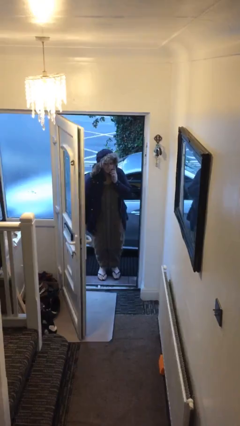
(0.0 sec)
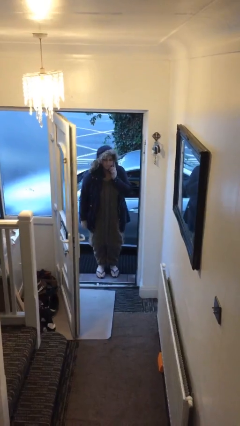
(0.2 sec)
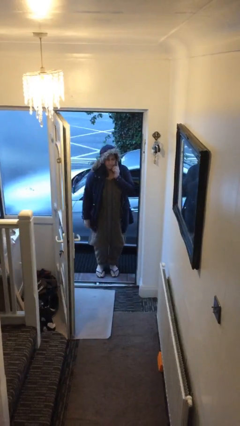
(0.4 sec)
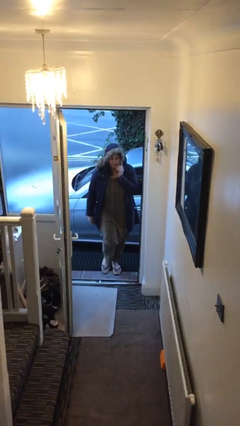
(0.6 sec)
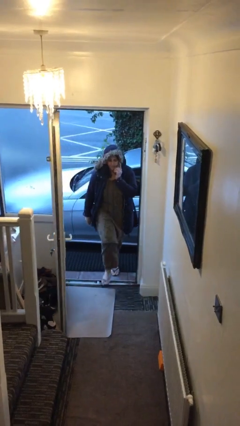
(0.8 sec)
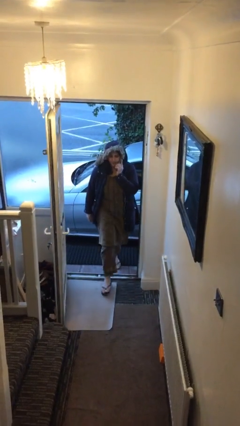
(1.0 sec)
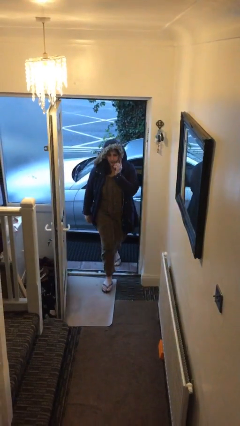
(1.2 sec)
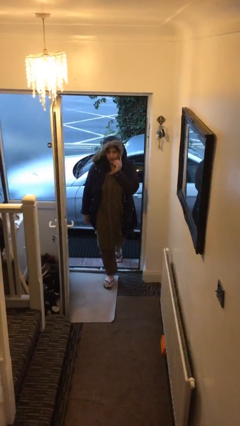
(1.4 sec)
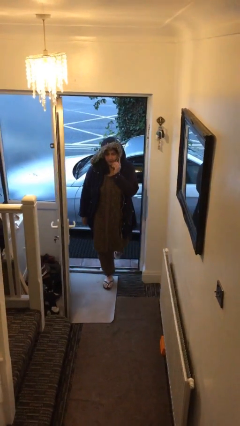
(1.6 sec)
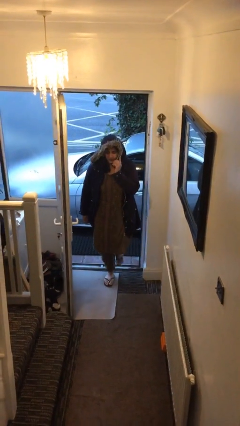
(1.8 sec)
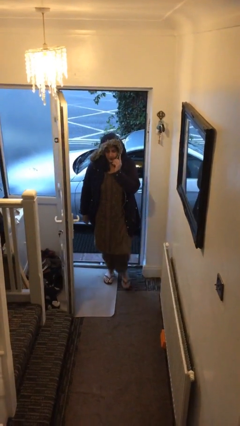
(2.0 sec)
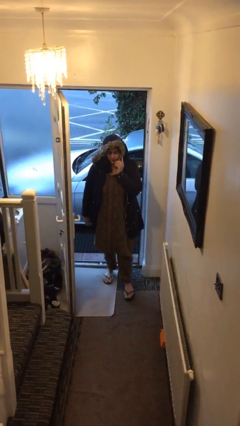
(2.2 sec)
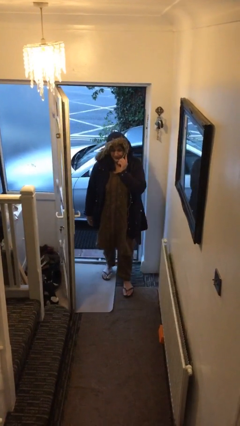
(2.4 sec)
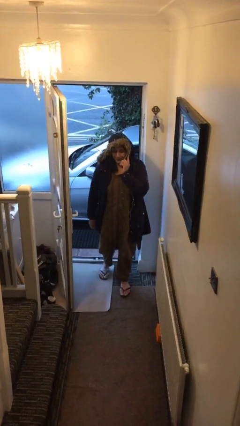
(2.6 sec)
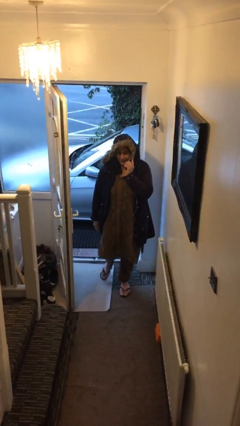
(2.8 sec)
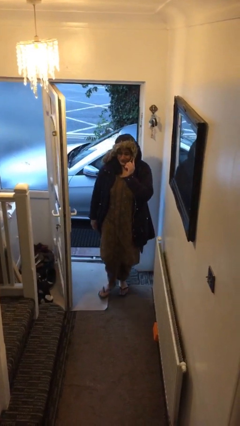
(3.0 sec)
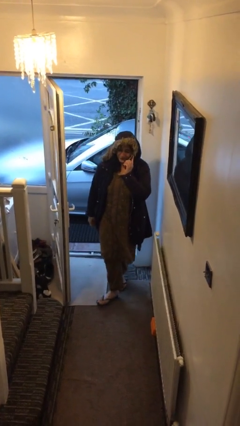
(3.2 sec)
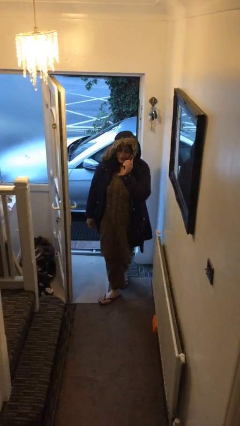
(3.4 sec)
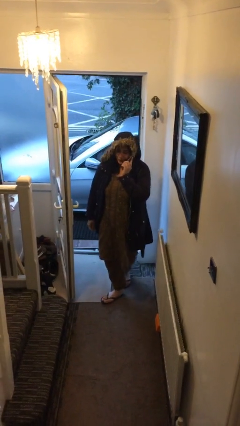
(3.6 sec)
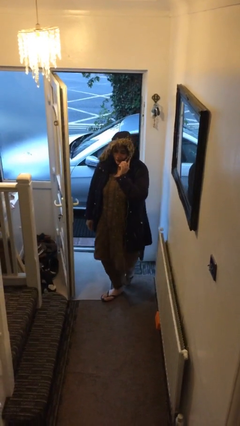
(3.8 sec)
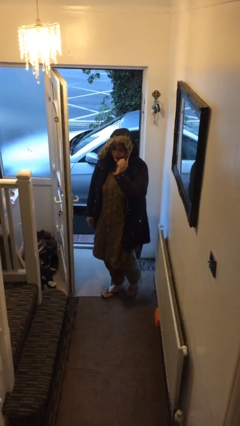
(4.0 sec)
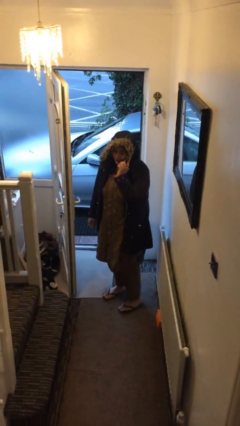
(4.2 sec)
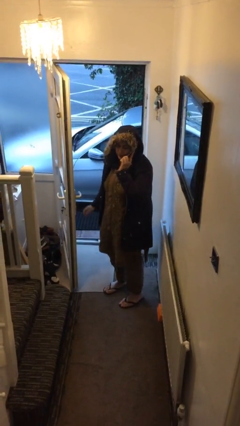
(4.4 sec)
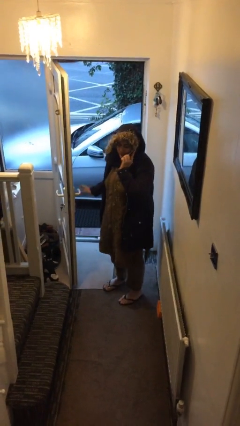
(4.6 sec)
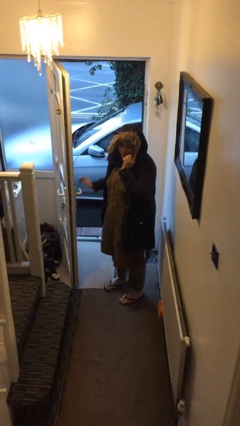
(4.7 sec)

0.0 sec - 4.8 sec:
person enters scene through structure

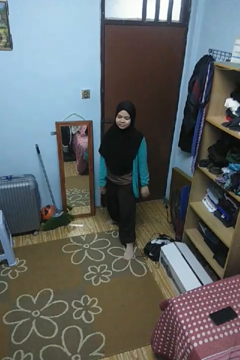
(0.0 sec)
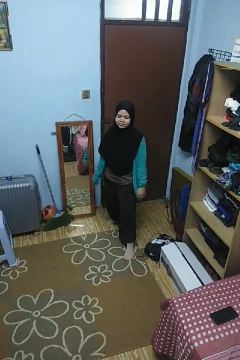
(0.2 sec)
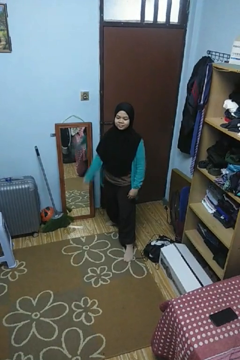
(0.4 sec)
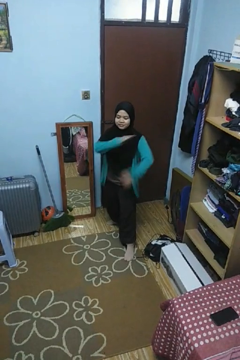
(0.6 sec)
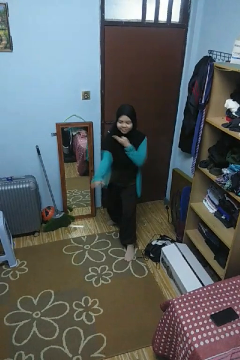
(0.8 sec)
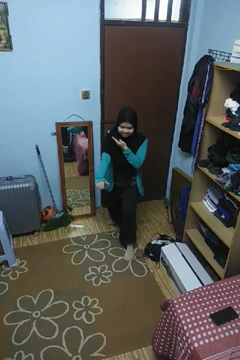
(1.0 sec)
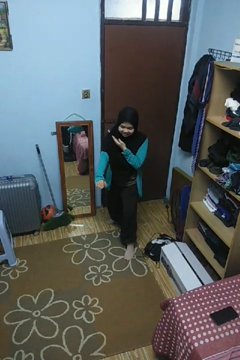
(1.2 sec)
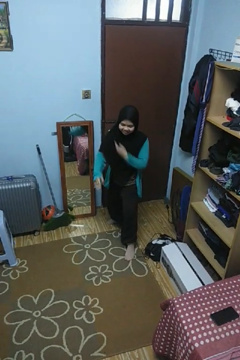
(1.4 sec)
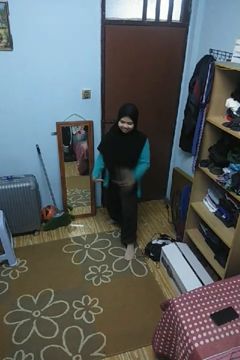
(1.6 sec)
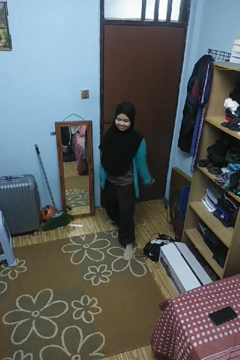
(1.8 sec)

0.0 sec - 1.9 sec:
person karate chop

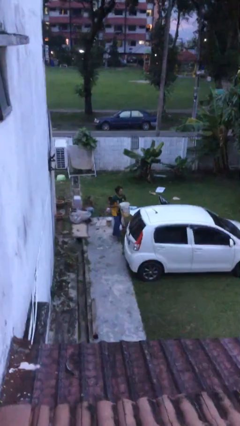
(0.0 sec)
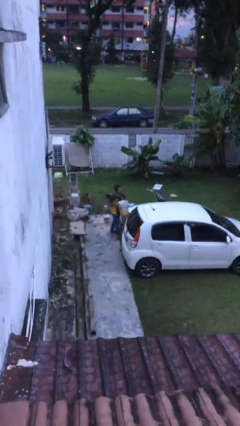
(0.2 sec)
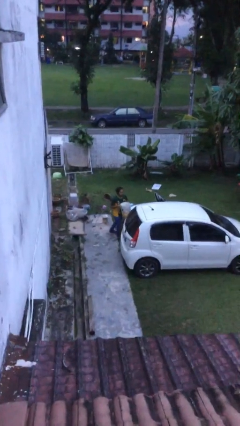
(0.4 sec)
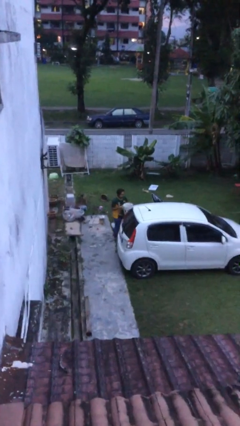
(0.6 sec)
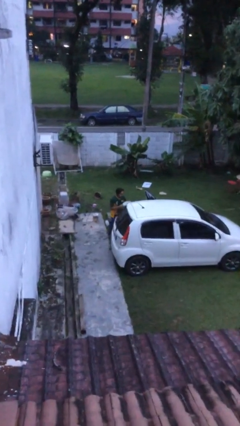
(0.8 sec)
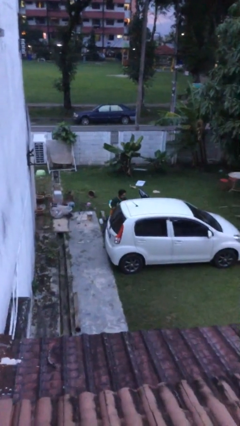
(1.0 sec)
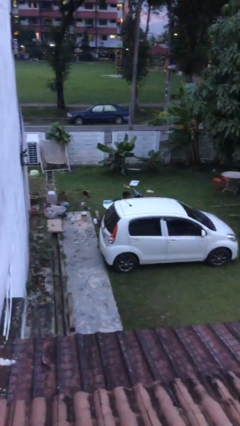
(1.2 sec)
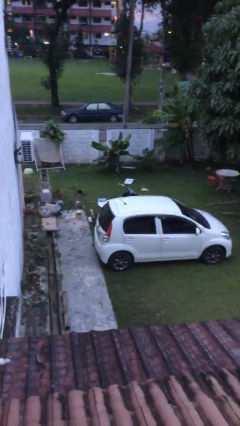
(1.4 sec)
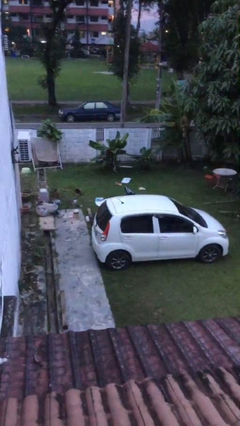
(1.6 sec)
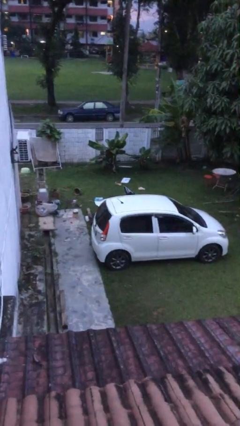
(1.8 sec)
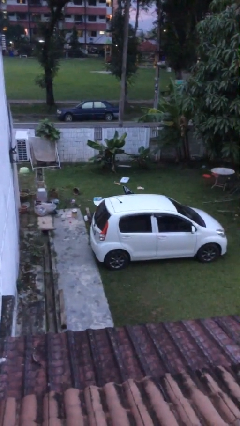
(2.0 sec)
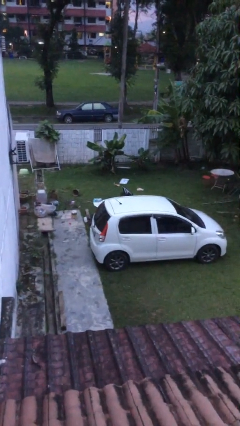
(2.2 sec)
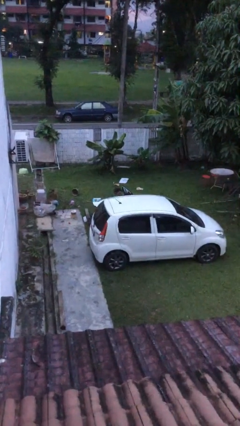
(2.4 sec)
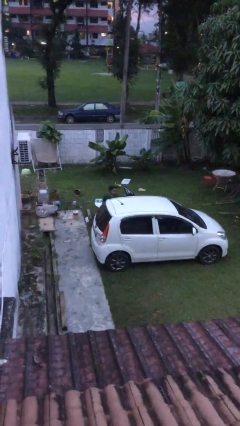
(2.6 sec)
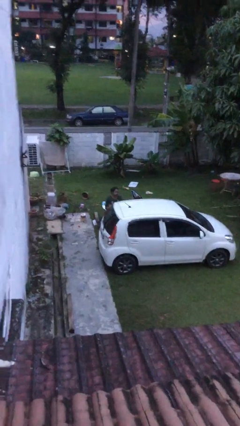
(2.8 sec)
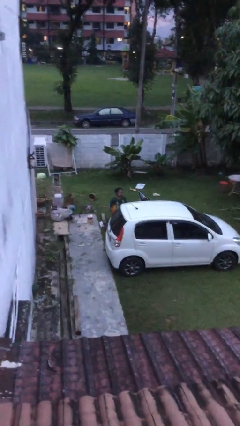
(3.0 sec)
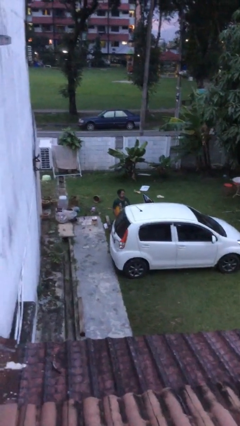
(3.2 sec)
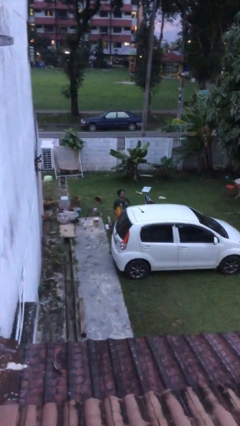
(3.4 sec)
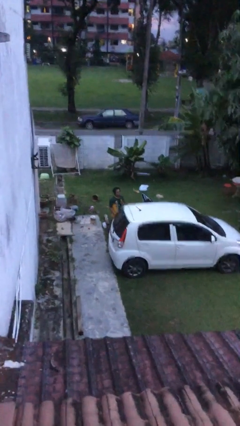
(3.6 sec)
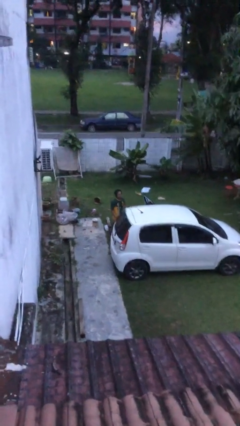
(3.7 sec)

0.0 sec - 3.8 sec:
person loads car

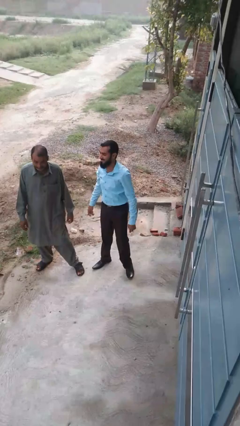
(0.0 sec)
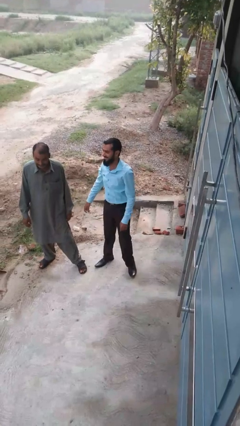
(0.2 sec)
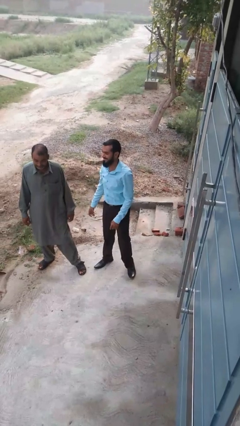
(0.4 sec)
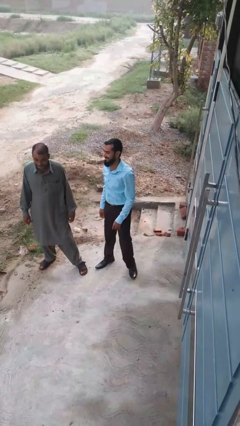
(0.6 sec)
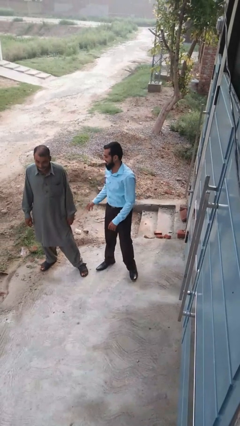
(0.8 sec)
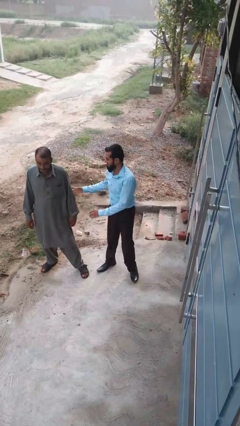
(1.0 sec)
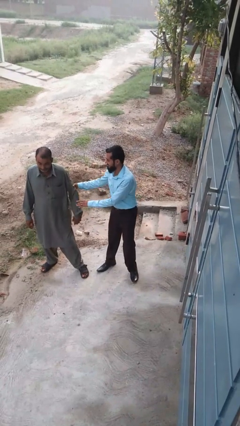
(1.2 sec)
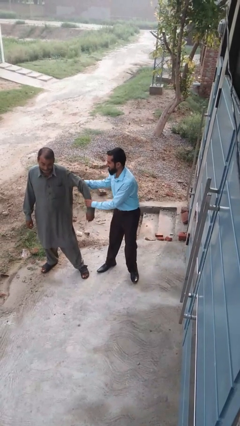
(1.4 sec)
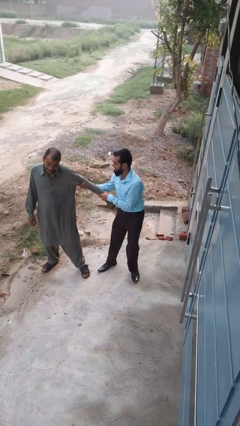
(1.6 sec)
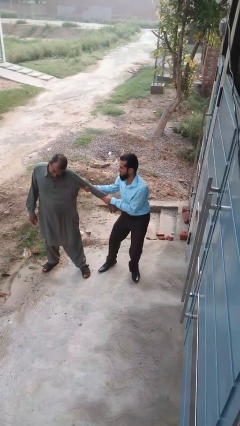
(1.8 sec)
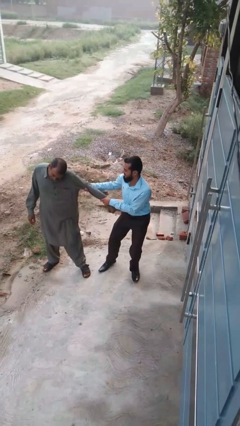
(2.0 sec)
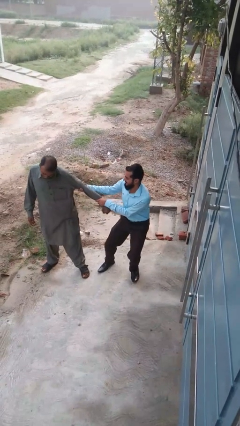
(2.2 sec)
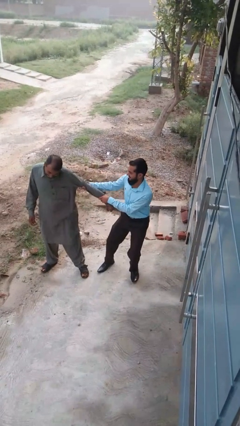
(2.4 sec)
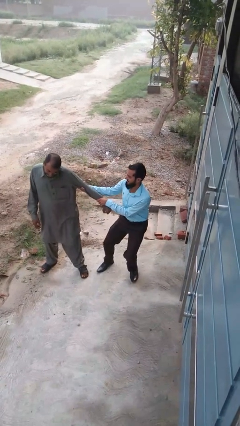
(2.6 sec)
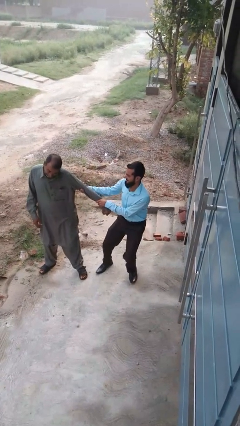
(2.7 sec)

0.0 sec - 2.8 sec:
person grabs person by forearm

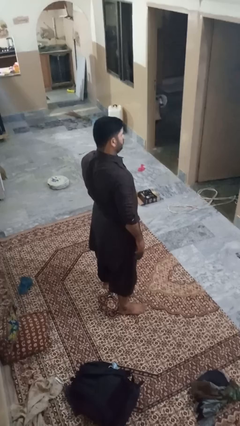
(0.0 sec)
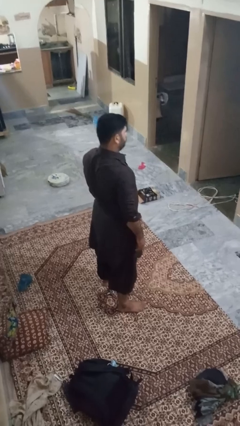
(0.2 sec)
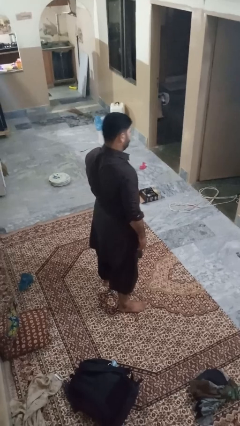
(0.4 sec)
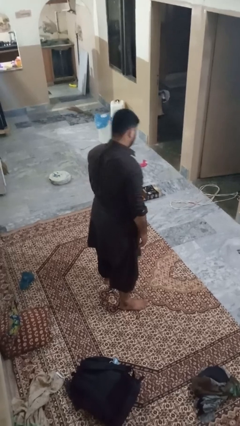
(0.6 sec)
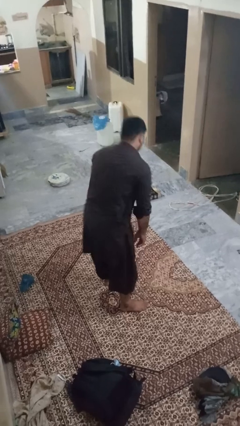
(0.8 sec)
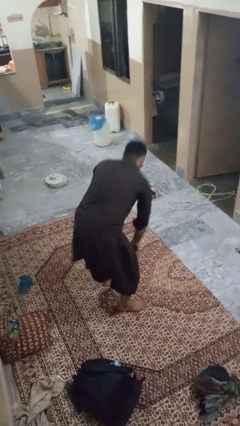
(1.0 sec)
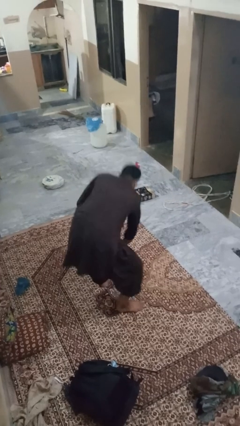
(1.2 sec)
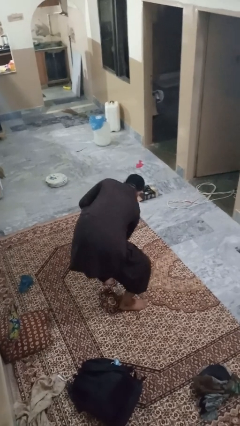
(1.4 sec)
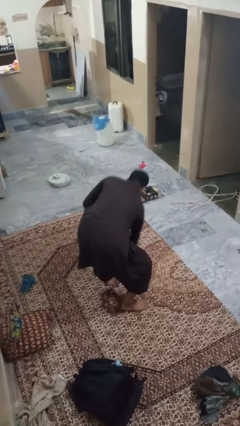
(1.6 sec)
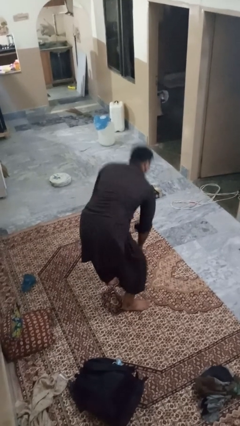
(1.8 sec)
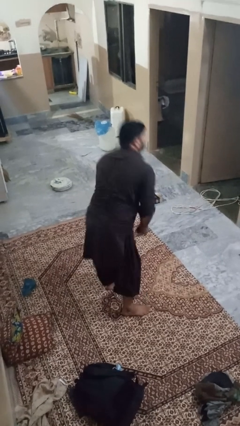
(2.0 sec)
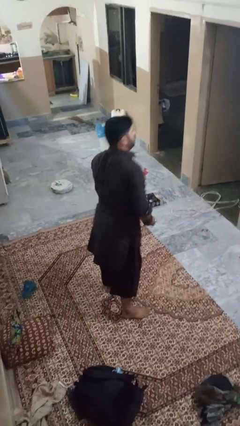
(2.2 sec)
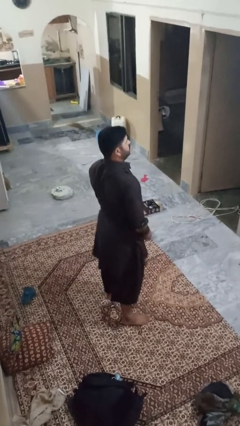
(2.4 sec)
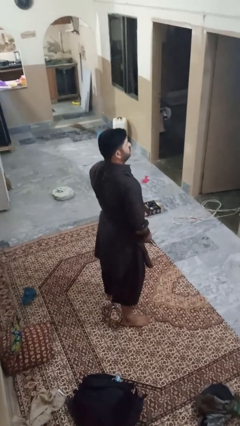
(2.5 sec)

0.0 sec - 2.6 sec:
person picks up object from floor

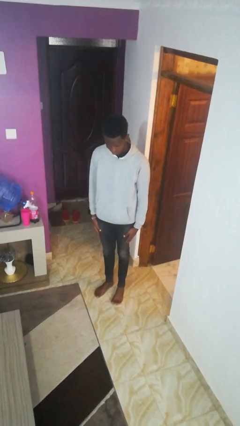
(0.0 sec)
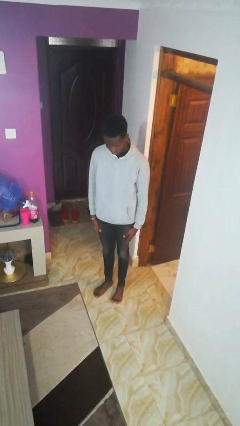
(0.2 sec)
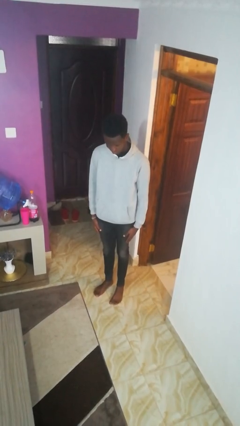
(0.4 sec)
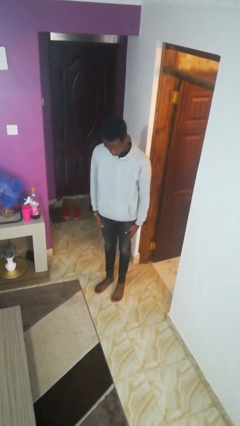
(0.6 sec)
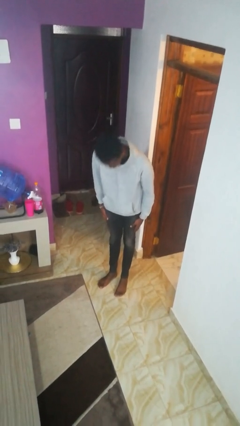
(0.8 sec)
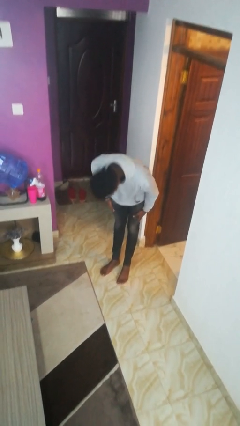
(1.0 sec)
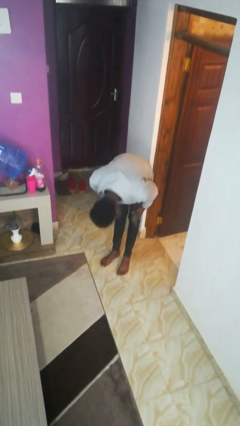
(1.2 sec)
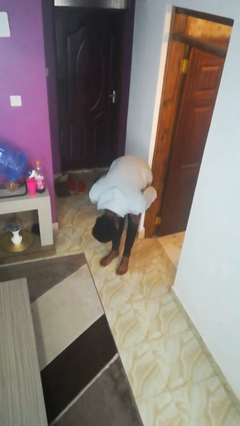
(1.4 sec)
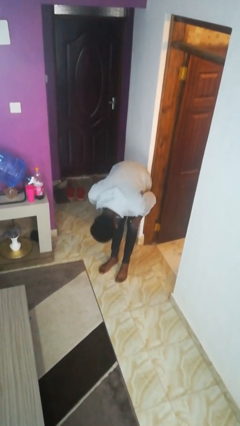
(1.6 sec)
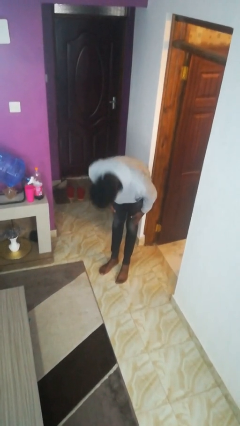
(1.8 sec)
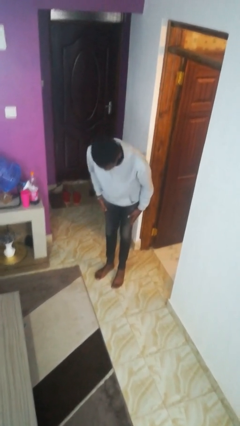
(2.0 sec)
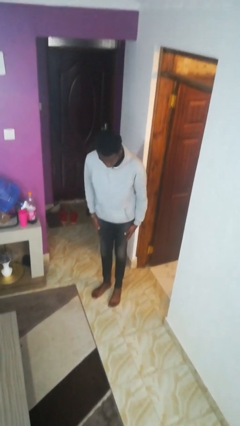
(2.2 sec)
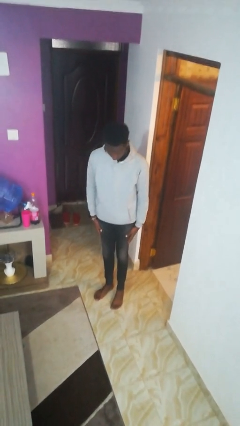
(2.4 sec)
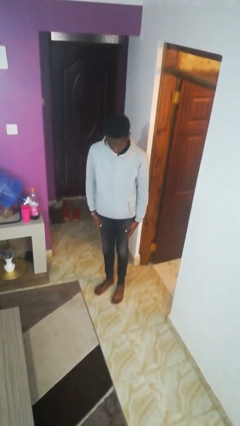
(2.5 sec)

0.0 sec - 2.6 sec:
person bows
